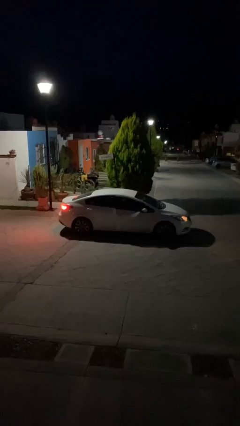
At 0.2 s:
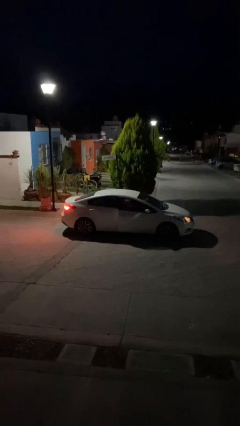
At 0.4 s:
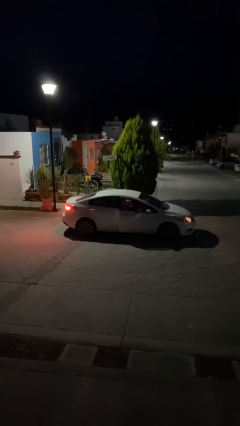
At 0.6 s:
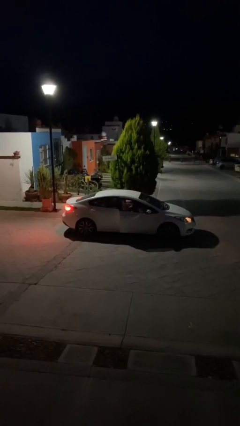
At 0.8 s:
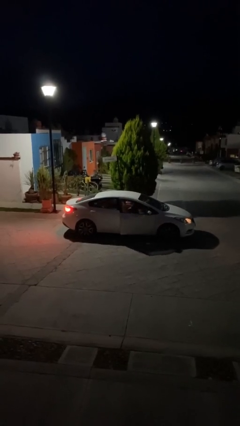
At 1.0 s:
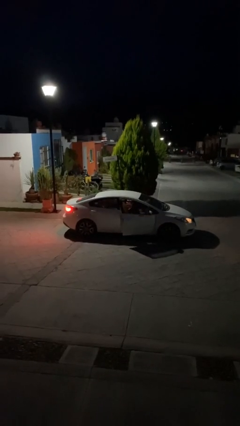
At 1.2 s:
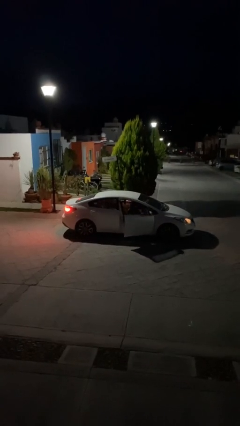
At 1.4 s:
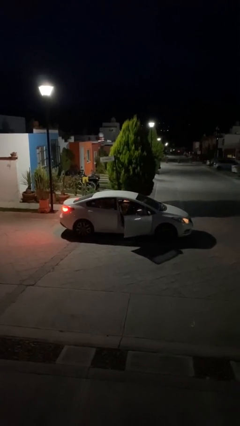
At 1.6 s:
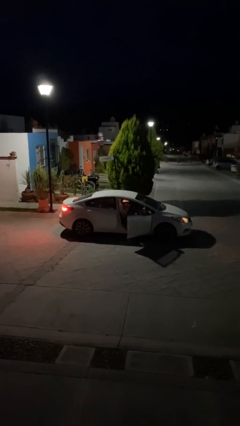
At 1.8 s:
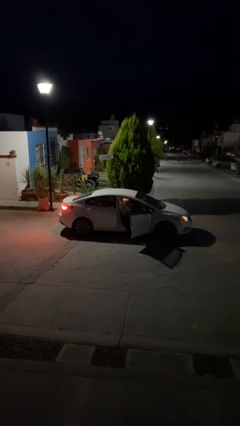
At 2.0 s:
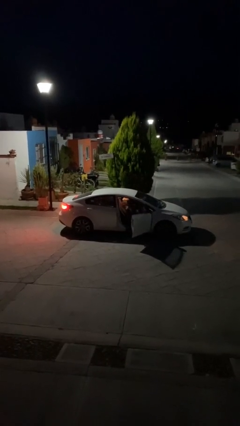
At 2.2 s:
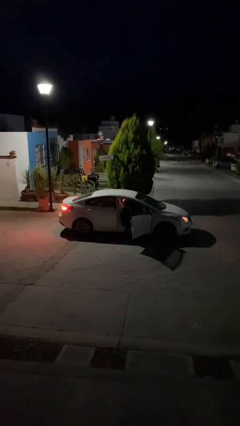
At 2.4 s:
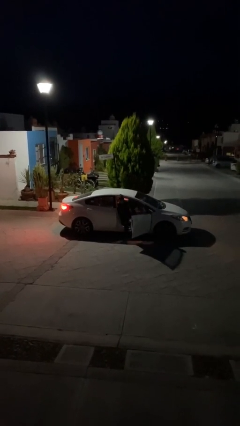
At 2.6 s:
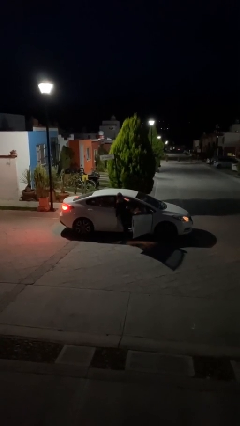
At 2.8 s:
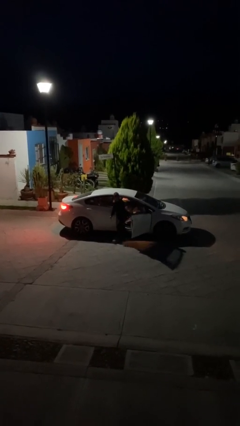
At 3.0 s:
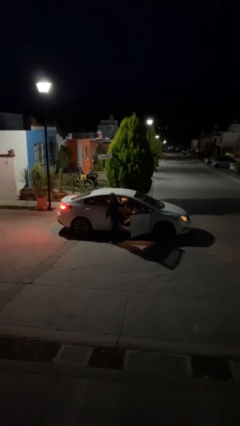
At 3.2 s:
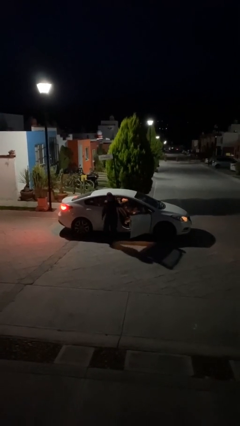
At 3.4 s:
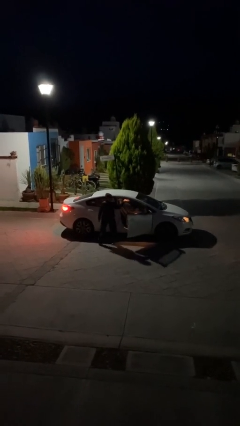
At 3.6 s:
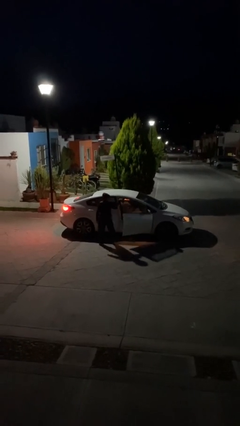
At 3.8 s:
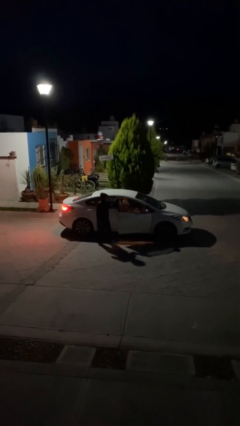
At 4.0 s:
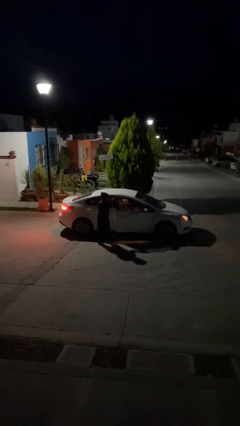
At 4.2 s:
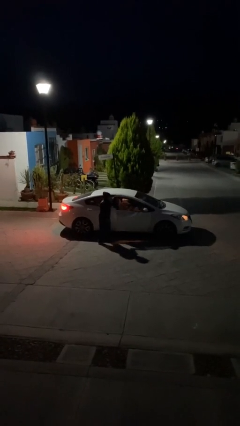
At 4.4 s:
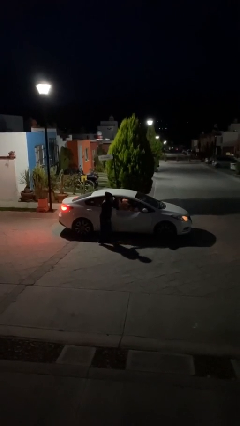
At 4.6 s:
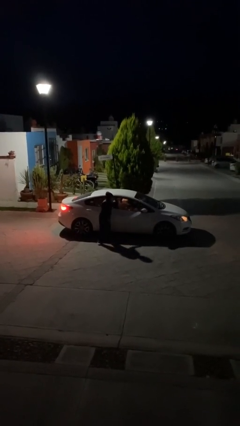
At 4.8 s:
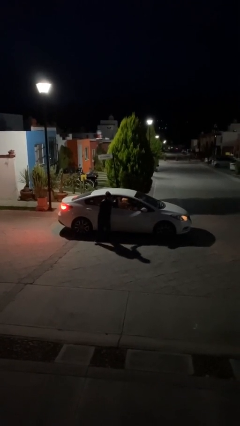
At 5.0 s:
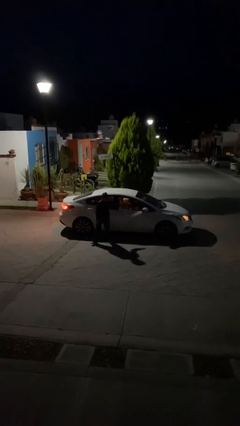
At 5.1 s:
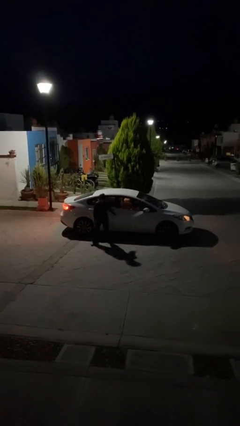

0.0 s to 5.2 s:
car drops off person

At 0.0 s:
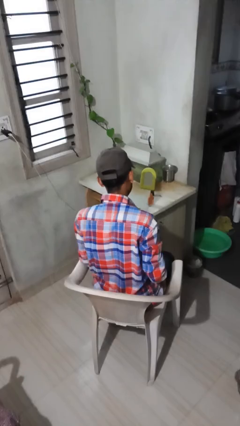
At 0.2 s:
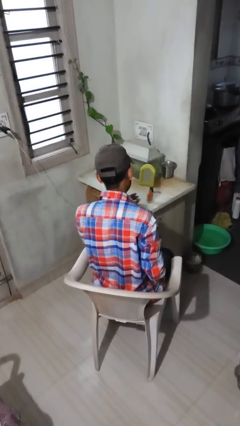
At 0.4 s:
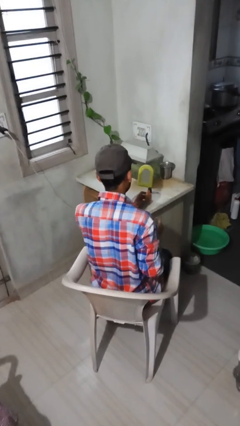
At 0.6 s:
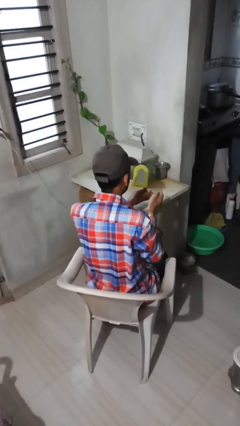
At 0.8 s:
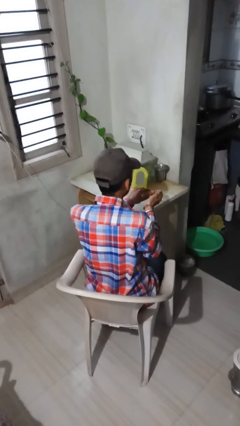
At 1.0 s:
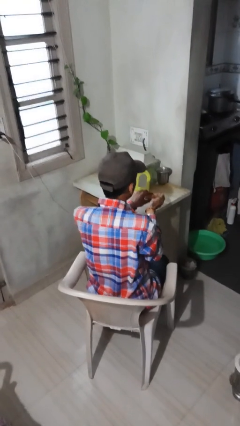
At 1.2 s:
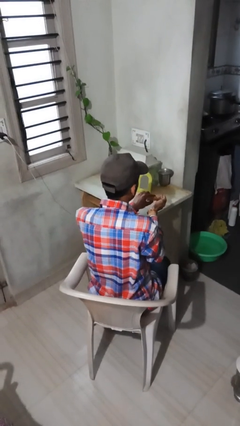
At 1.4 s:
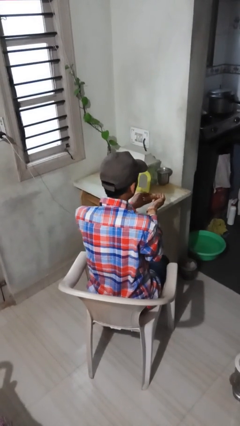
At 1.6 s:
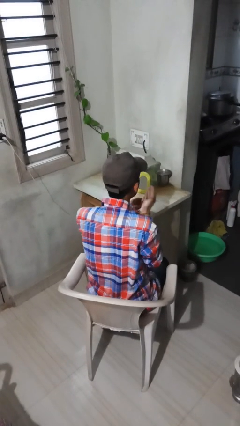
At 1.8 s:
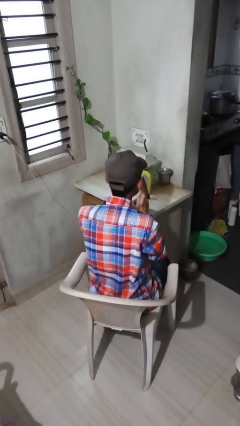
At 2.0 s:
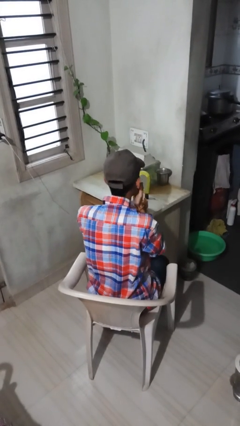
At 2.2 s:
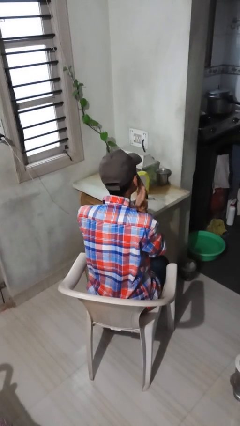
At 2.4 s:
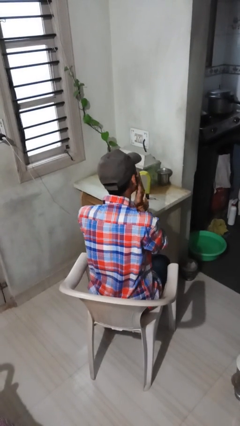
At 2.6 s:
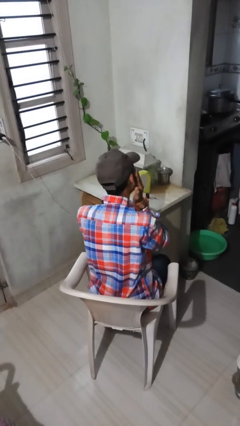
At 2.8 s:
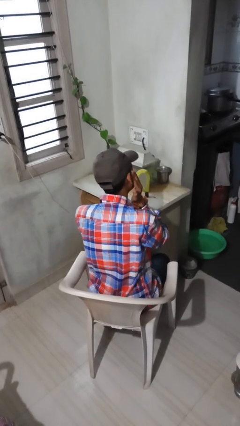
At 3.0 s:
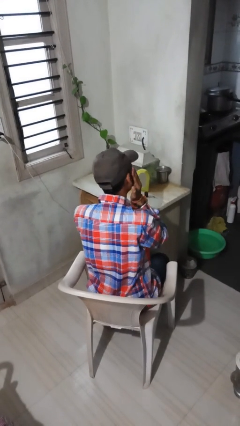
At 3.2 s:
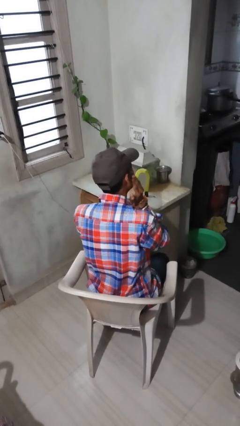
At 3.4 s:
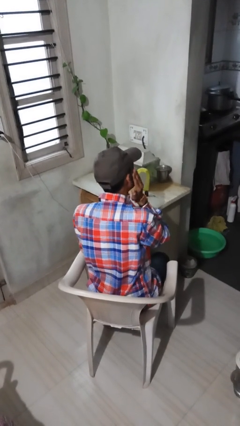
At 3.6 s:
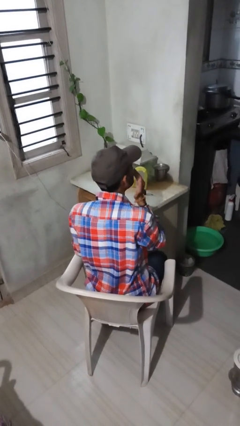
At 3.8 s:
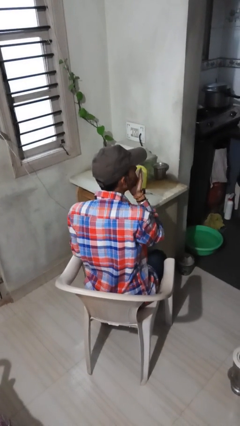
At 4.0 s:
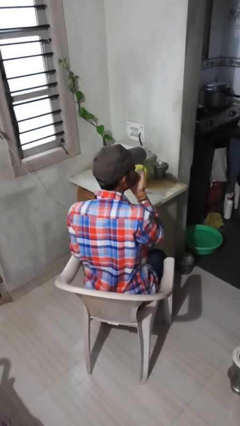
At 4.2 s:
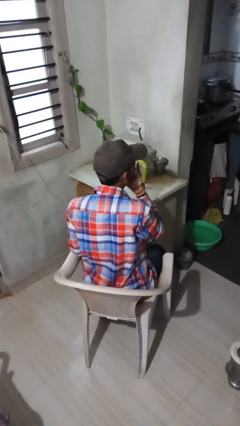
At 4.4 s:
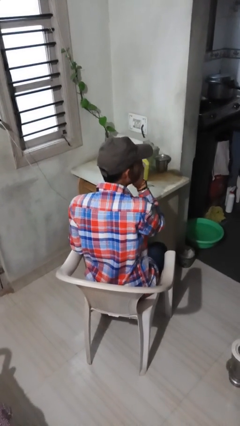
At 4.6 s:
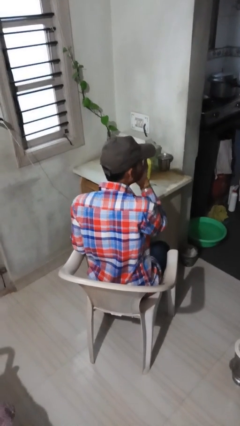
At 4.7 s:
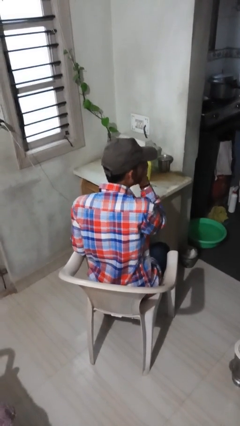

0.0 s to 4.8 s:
person applies foundation makeup

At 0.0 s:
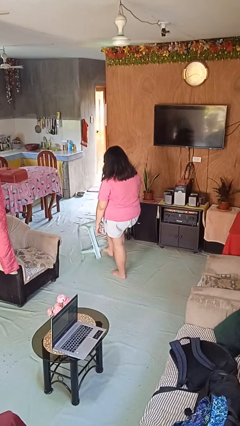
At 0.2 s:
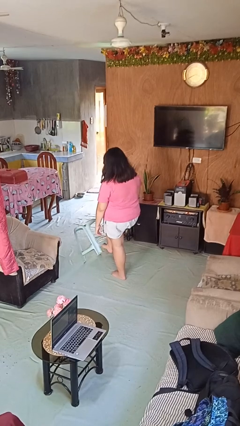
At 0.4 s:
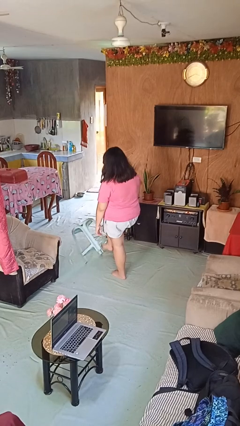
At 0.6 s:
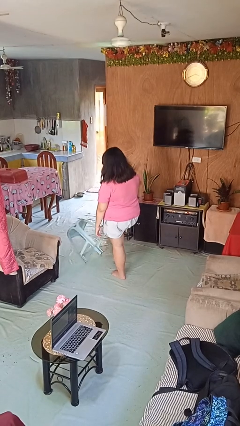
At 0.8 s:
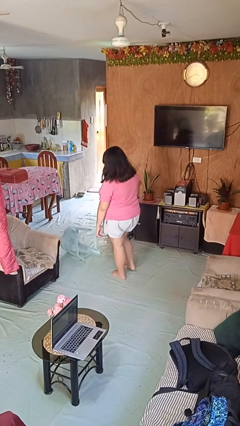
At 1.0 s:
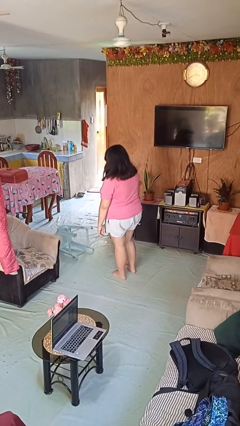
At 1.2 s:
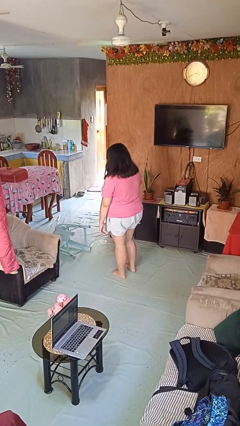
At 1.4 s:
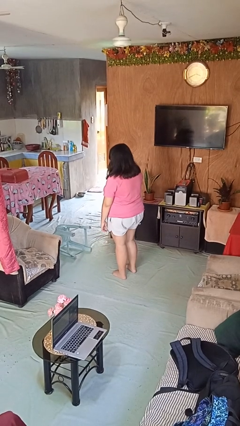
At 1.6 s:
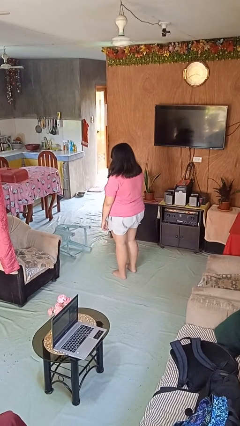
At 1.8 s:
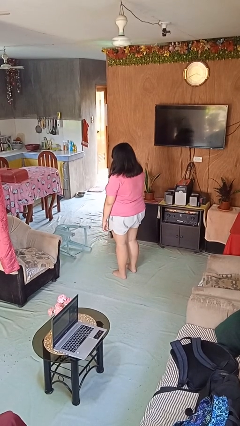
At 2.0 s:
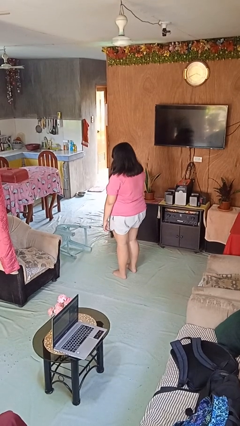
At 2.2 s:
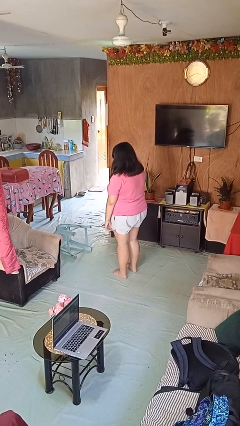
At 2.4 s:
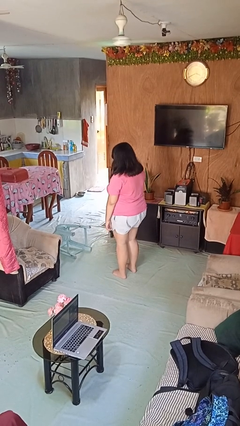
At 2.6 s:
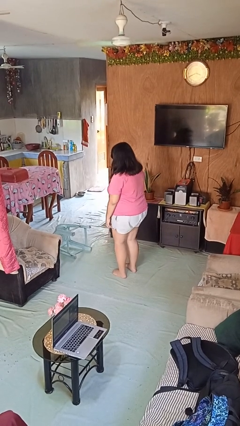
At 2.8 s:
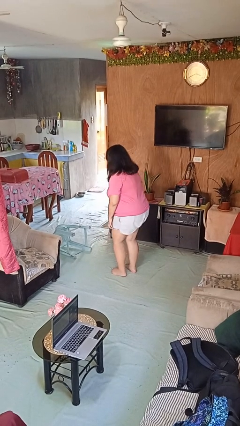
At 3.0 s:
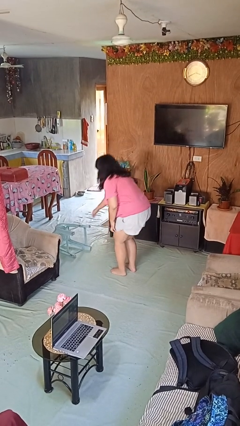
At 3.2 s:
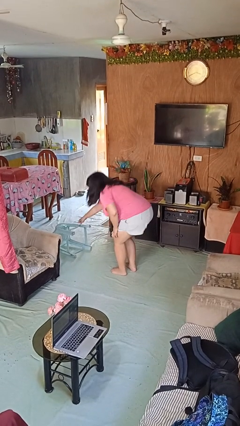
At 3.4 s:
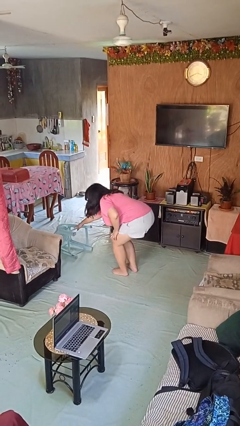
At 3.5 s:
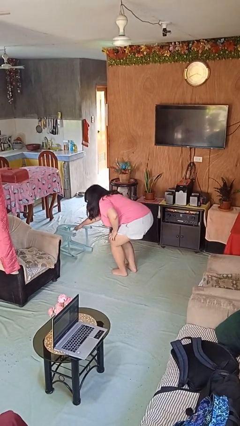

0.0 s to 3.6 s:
person knocks over furniture

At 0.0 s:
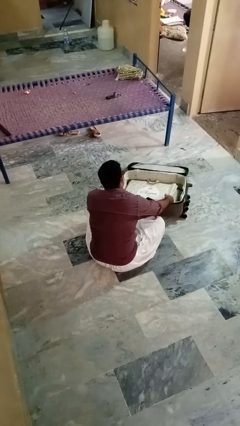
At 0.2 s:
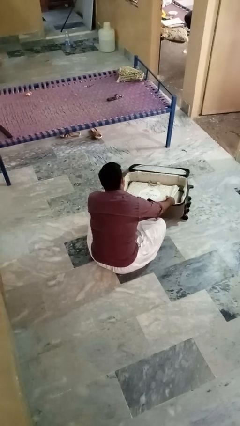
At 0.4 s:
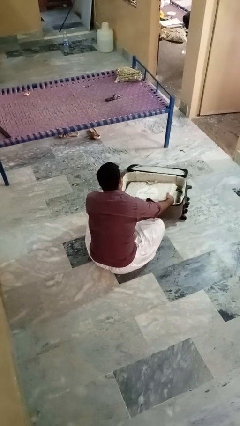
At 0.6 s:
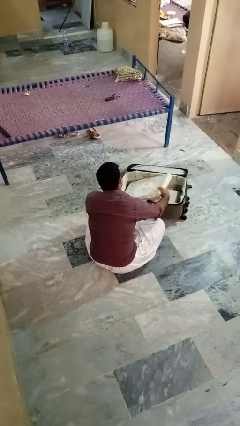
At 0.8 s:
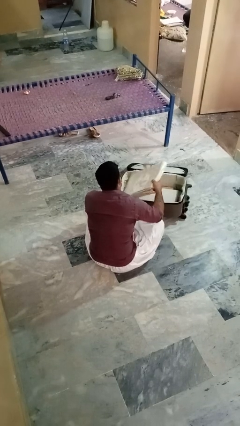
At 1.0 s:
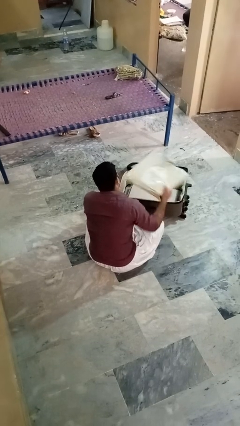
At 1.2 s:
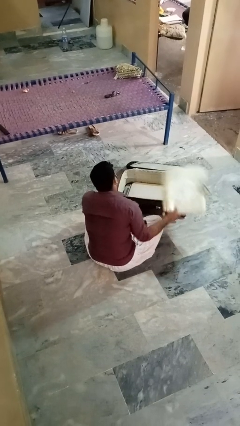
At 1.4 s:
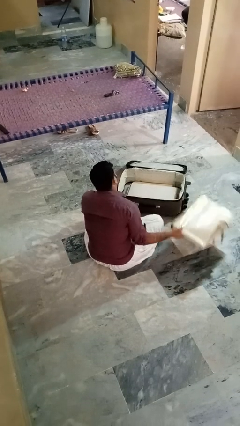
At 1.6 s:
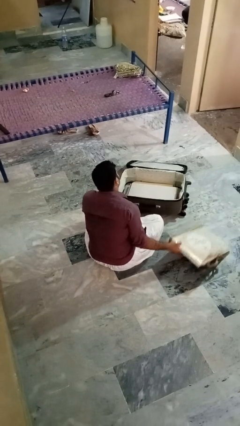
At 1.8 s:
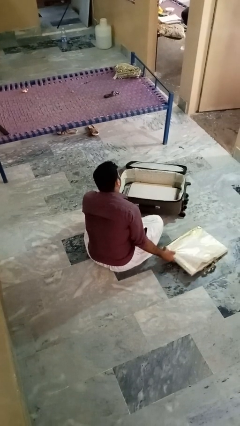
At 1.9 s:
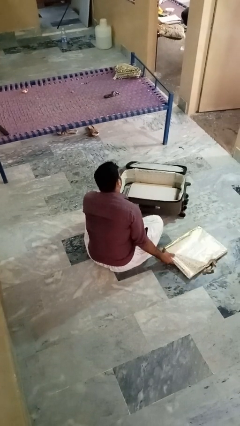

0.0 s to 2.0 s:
person takes object from bag

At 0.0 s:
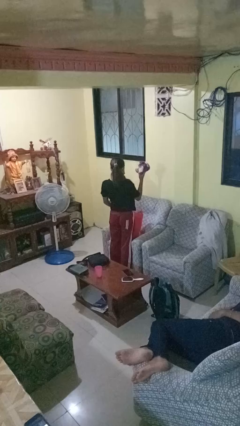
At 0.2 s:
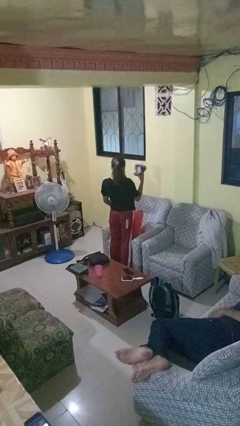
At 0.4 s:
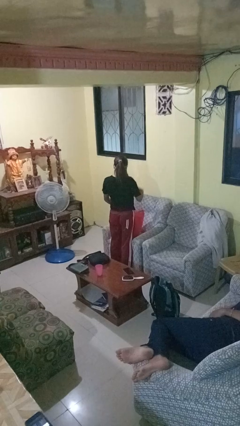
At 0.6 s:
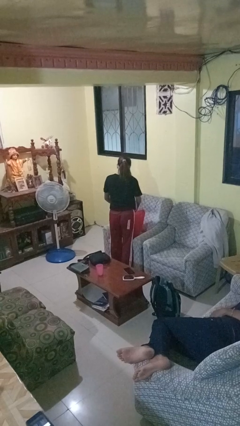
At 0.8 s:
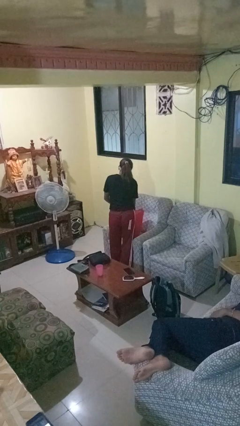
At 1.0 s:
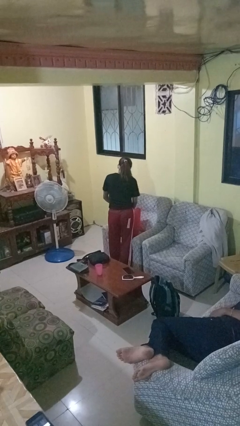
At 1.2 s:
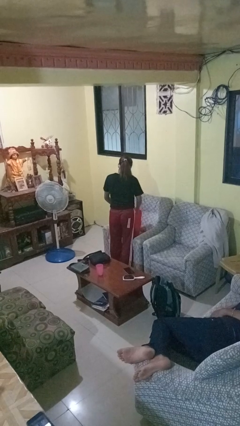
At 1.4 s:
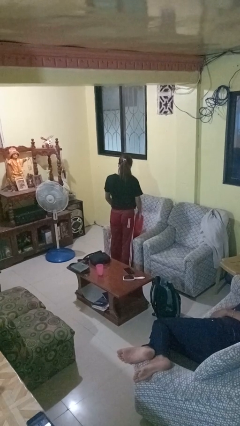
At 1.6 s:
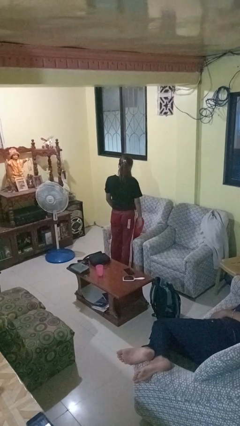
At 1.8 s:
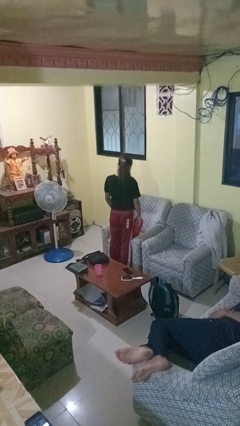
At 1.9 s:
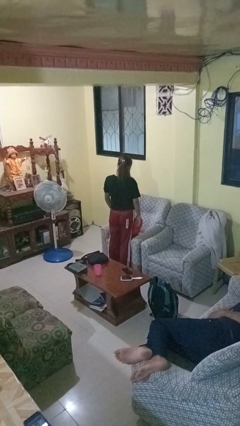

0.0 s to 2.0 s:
person puts object into bag
